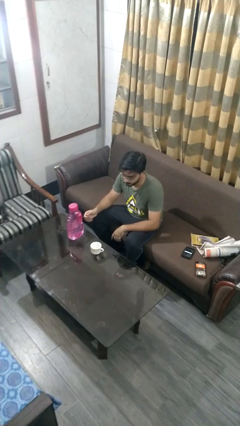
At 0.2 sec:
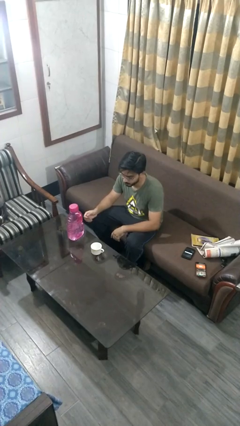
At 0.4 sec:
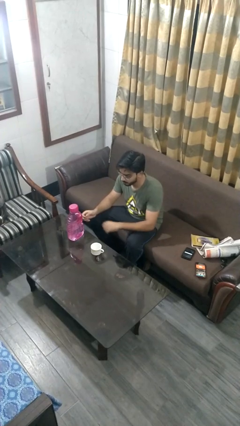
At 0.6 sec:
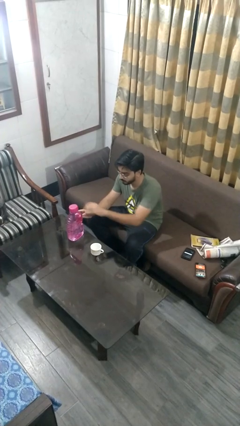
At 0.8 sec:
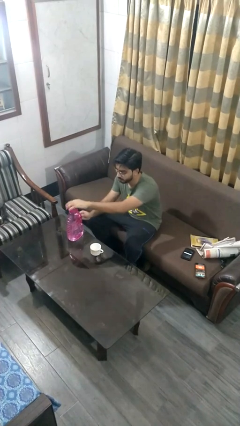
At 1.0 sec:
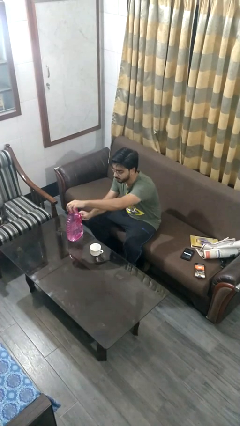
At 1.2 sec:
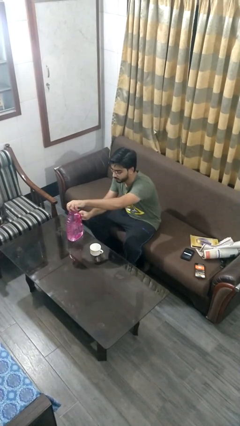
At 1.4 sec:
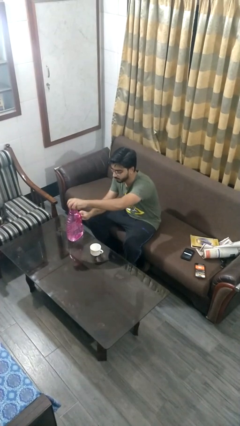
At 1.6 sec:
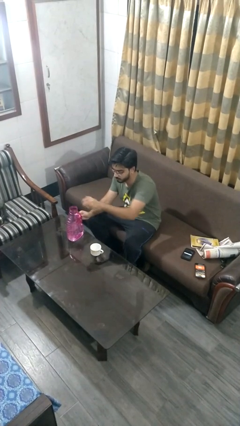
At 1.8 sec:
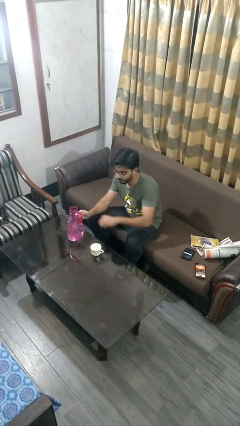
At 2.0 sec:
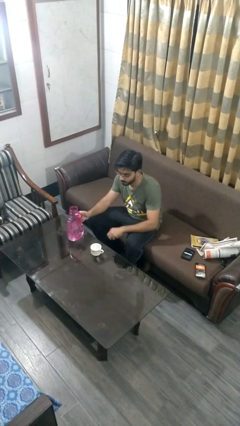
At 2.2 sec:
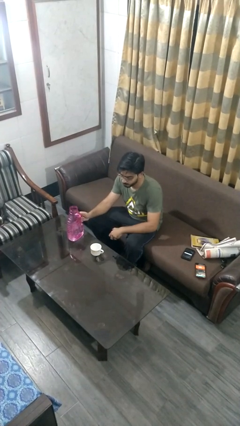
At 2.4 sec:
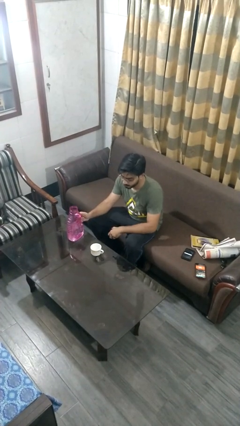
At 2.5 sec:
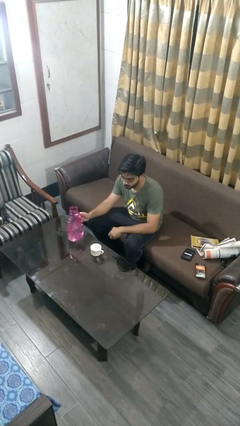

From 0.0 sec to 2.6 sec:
person unscrews lid from bottle

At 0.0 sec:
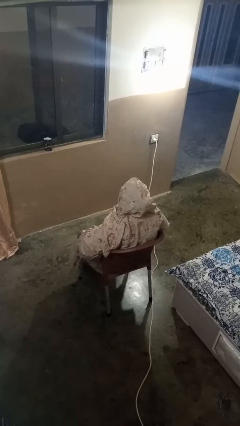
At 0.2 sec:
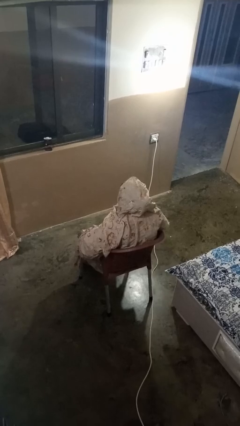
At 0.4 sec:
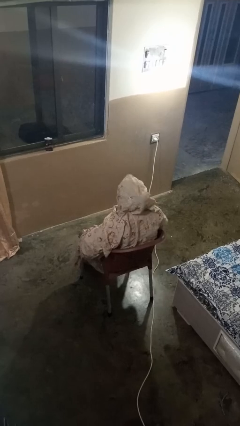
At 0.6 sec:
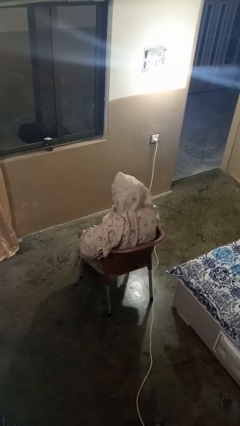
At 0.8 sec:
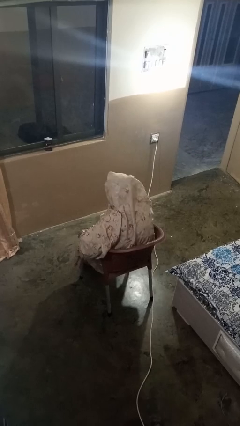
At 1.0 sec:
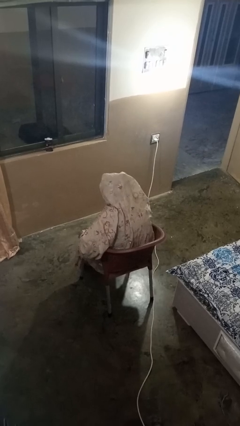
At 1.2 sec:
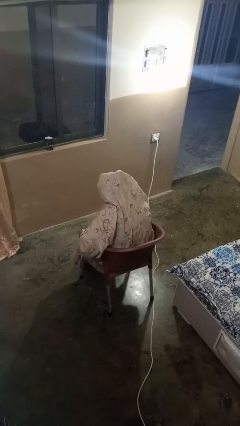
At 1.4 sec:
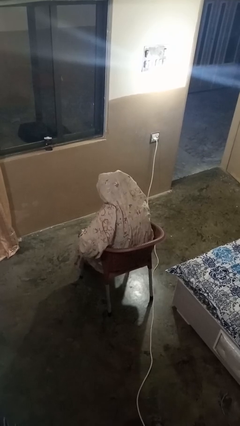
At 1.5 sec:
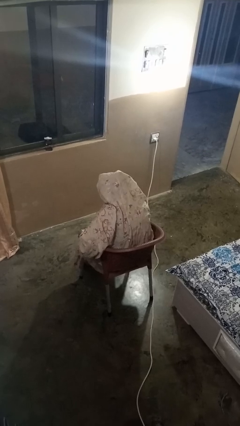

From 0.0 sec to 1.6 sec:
person looks at hands in lap

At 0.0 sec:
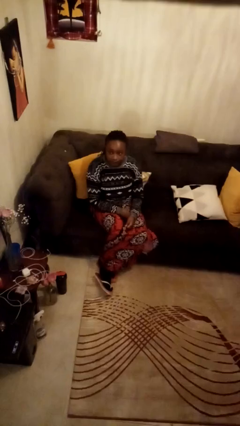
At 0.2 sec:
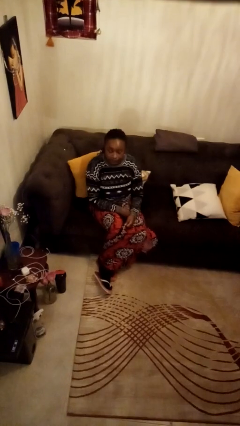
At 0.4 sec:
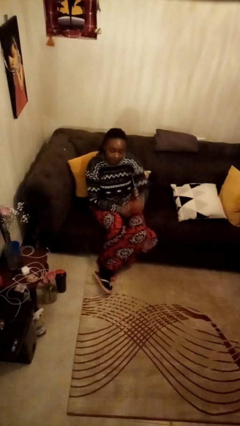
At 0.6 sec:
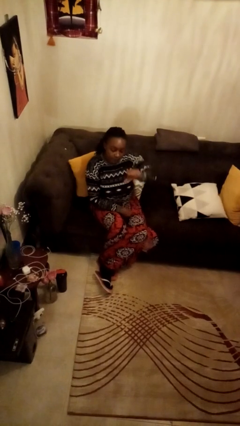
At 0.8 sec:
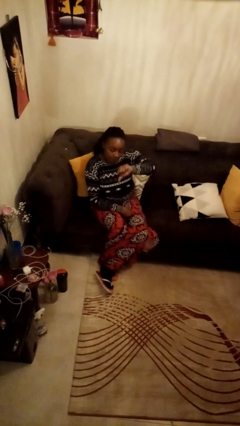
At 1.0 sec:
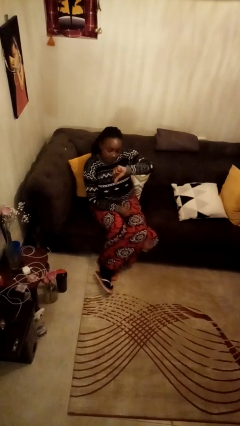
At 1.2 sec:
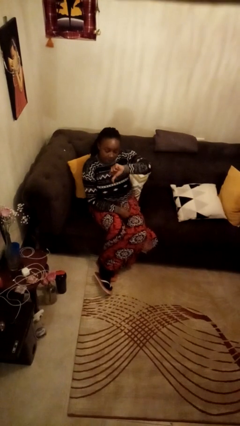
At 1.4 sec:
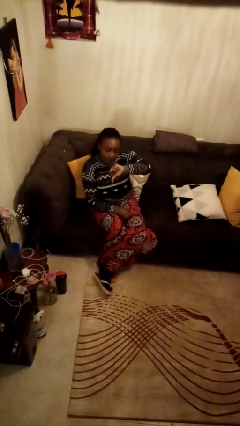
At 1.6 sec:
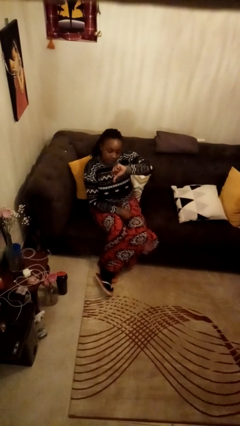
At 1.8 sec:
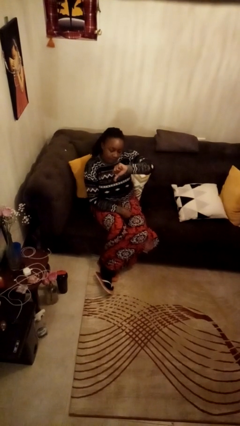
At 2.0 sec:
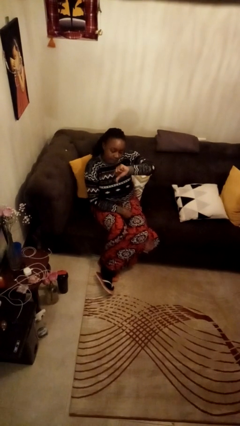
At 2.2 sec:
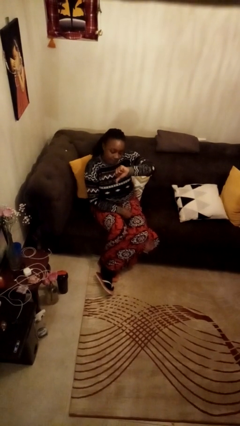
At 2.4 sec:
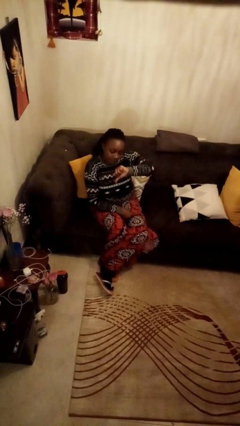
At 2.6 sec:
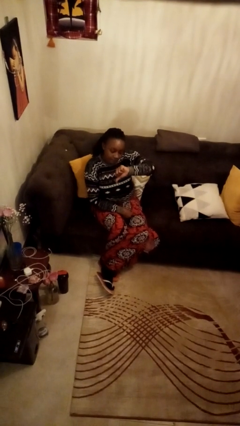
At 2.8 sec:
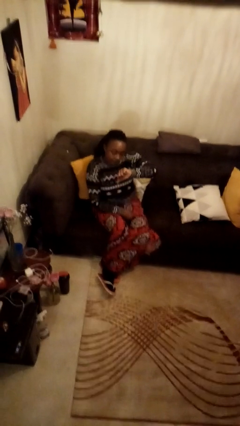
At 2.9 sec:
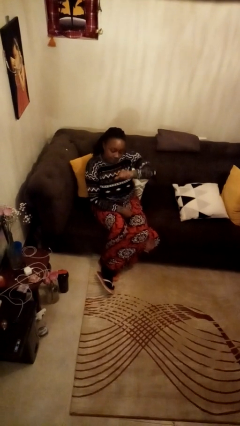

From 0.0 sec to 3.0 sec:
person gestures thumbs down

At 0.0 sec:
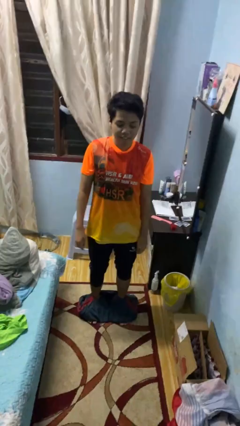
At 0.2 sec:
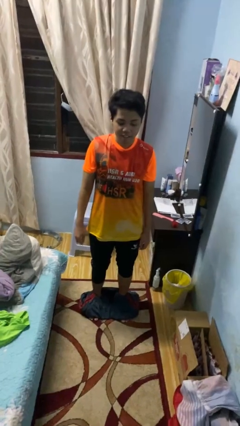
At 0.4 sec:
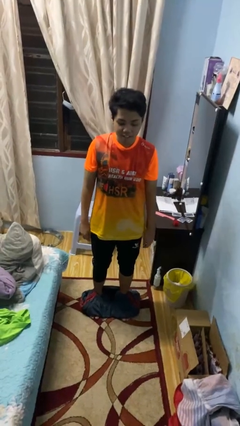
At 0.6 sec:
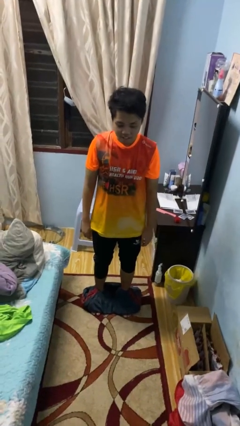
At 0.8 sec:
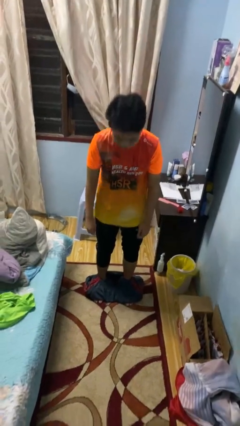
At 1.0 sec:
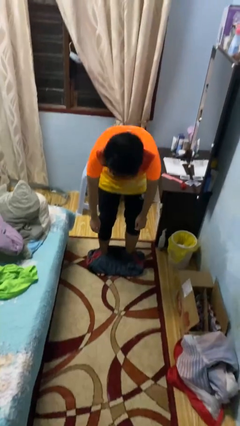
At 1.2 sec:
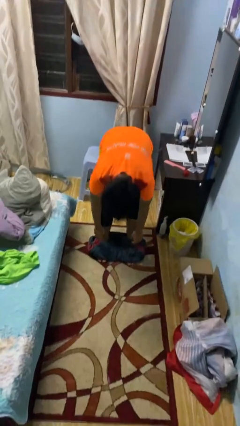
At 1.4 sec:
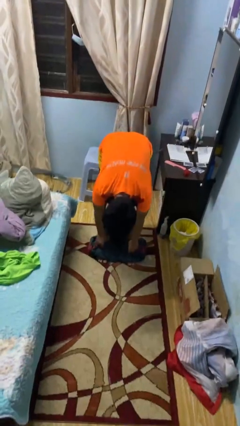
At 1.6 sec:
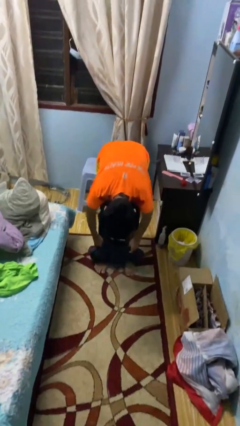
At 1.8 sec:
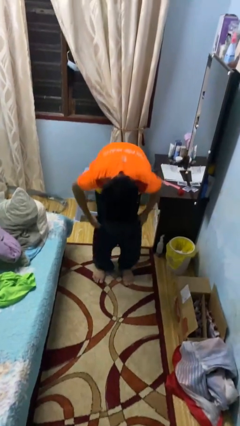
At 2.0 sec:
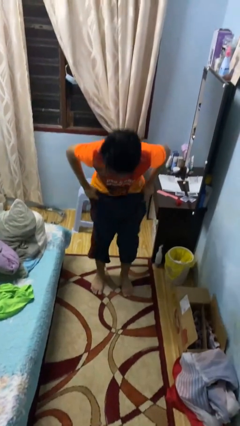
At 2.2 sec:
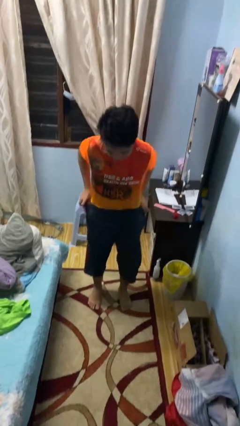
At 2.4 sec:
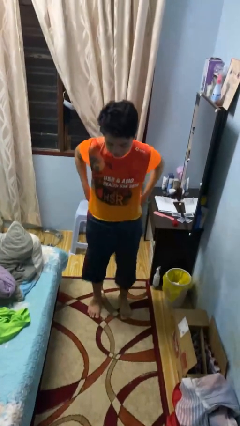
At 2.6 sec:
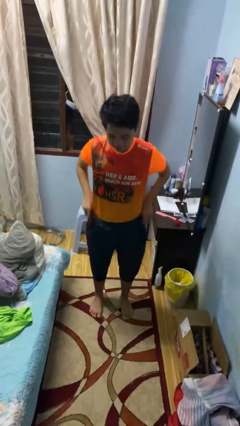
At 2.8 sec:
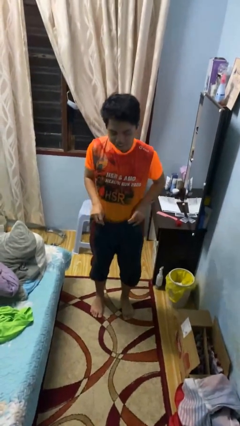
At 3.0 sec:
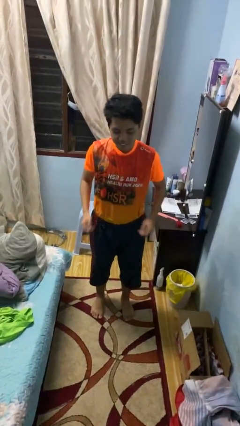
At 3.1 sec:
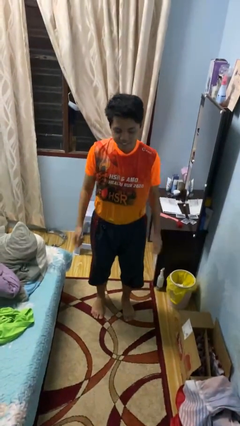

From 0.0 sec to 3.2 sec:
person puts on pants

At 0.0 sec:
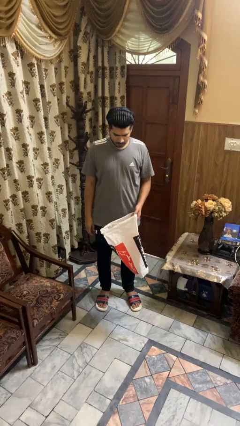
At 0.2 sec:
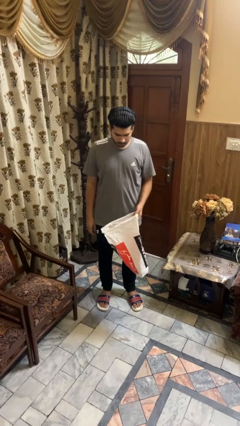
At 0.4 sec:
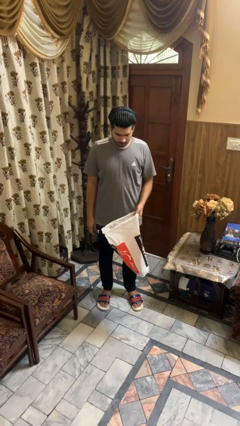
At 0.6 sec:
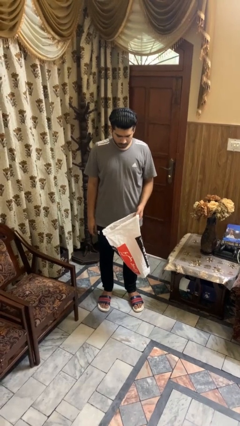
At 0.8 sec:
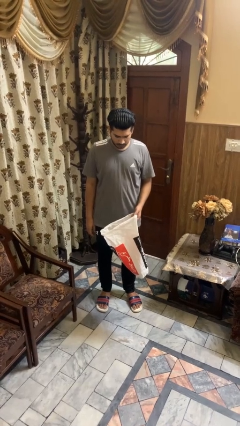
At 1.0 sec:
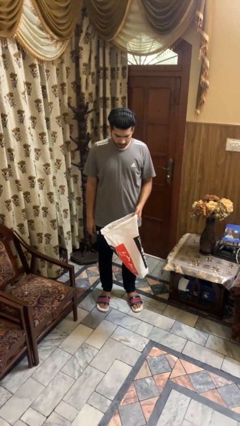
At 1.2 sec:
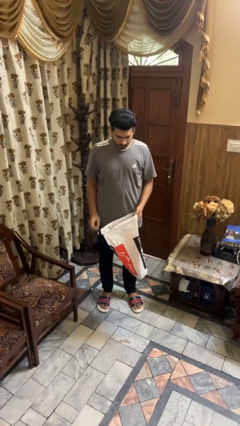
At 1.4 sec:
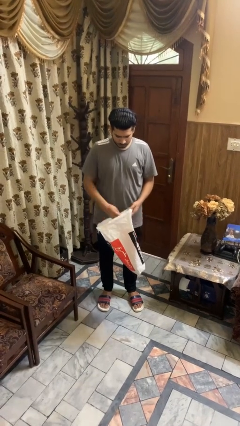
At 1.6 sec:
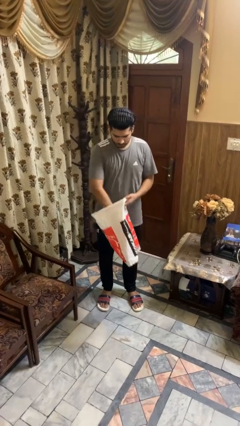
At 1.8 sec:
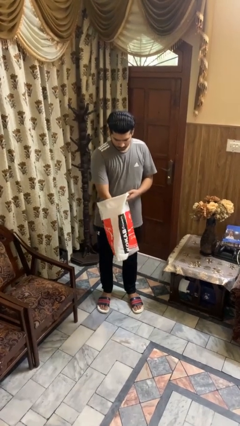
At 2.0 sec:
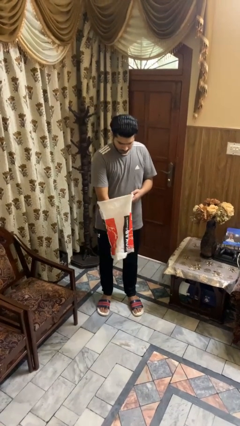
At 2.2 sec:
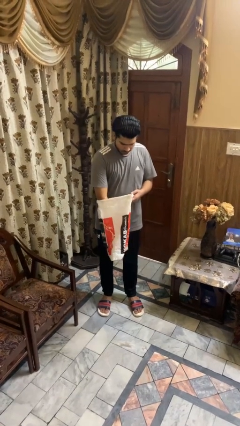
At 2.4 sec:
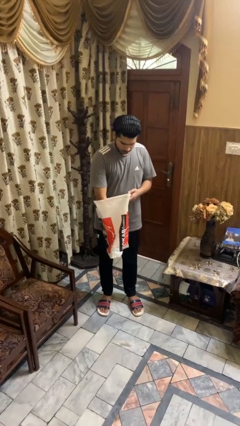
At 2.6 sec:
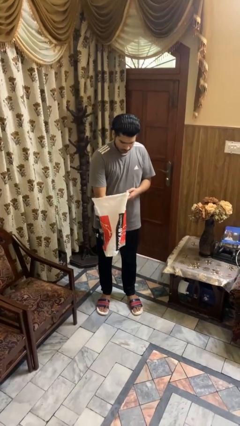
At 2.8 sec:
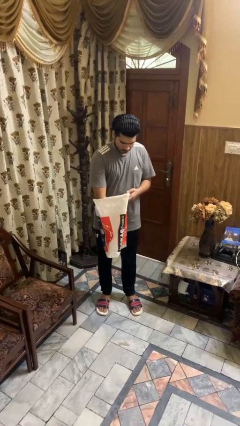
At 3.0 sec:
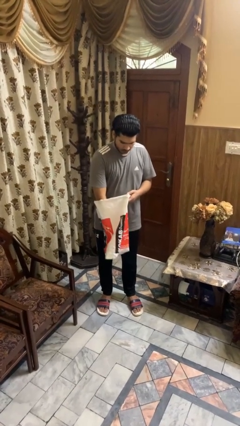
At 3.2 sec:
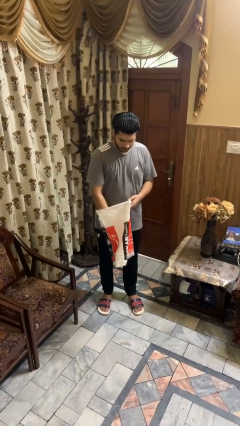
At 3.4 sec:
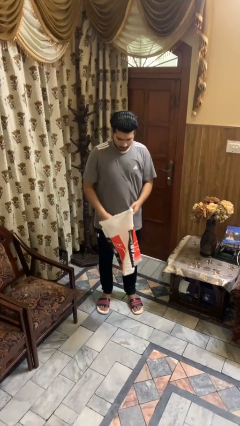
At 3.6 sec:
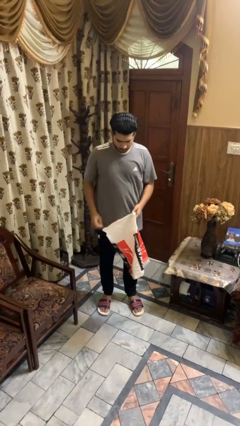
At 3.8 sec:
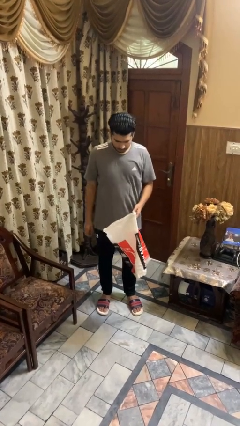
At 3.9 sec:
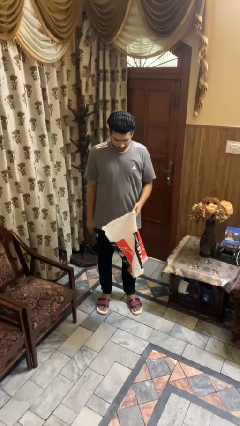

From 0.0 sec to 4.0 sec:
person searches in bag

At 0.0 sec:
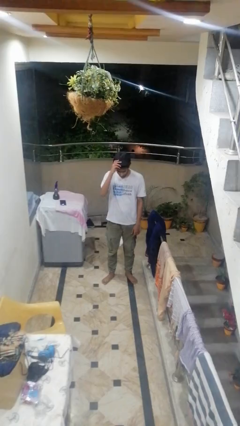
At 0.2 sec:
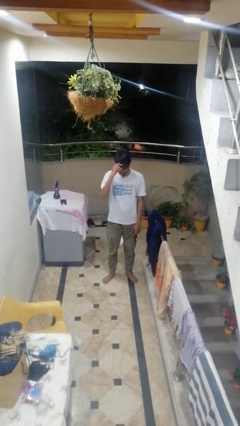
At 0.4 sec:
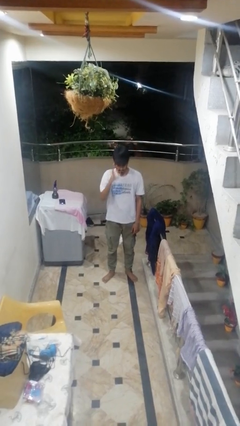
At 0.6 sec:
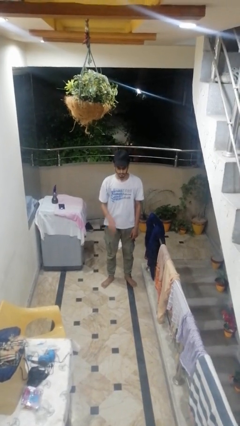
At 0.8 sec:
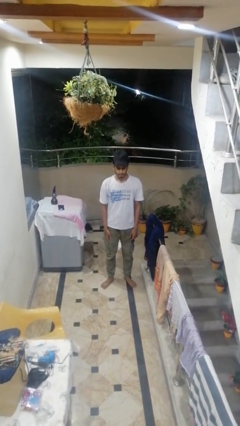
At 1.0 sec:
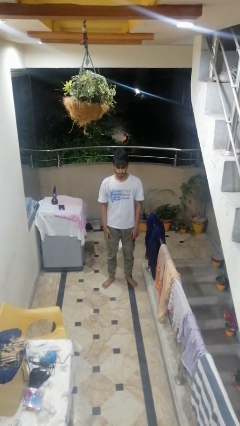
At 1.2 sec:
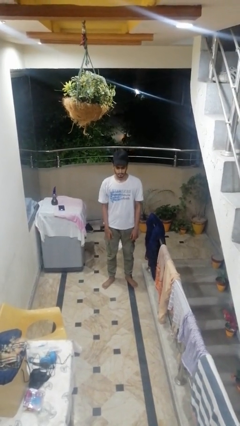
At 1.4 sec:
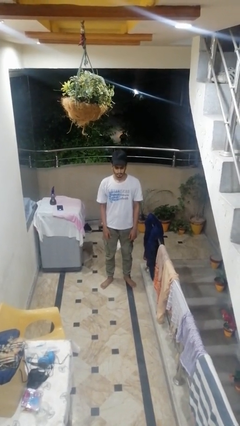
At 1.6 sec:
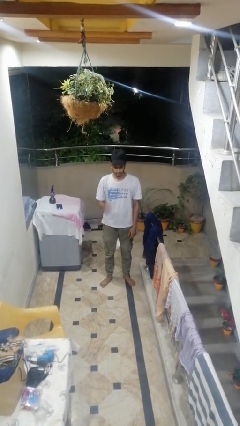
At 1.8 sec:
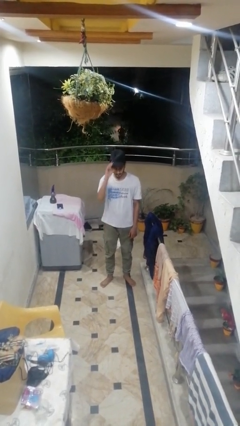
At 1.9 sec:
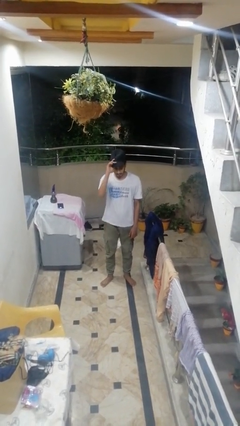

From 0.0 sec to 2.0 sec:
person puts on hat

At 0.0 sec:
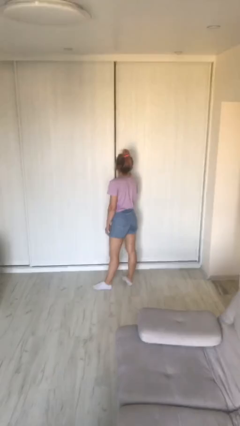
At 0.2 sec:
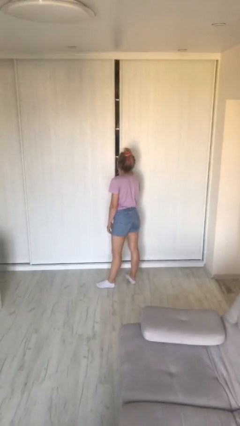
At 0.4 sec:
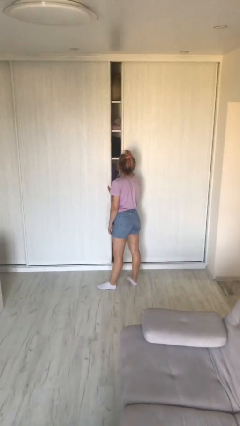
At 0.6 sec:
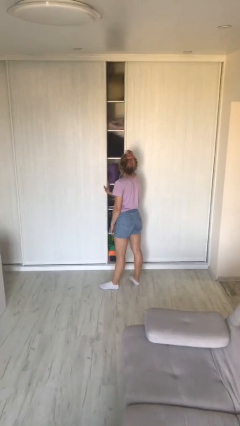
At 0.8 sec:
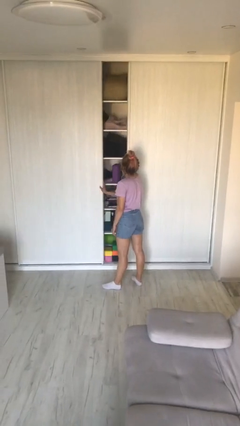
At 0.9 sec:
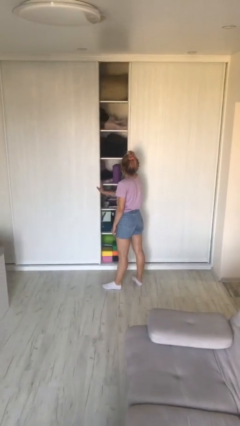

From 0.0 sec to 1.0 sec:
person opens sliding door
